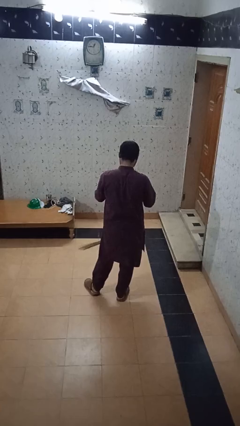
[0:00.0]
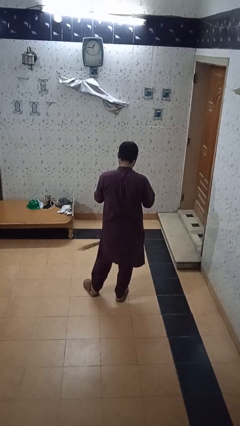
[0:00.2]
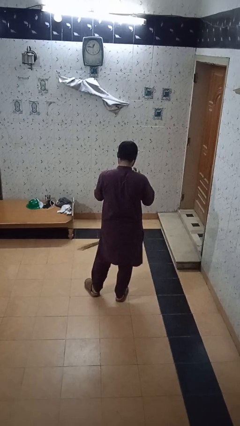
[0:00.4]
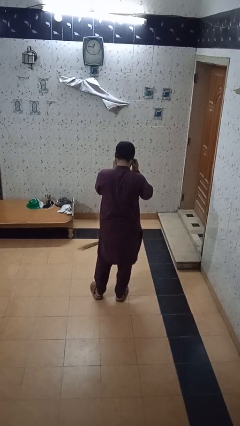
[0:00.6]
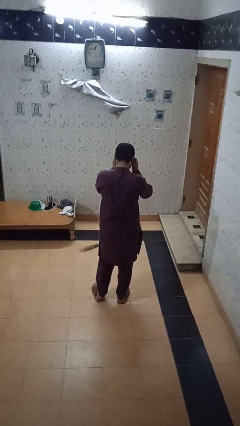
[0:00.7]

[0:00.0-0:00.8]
person takes off glasses

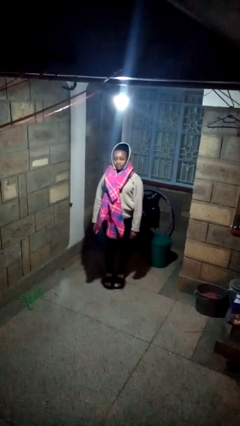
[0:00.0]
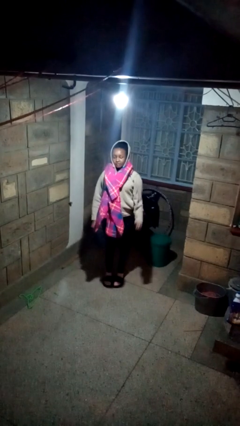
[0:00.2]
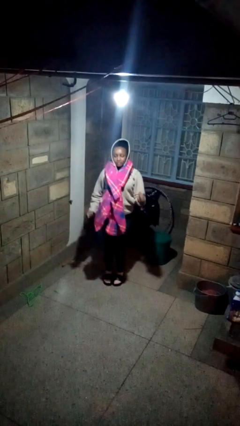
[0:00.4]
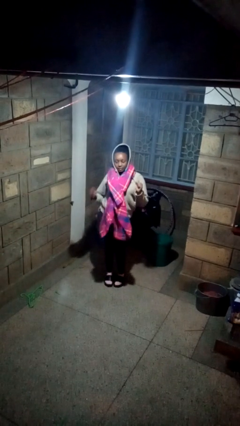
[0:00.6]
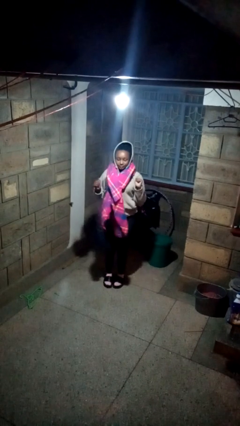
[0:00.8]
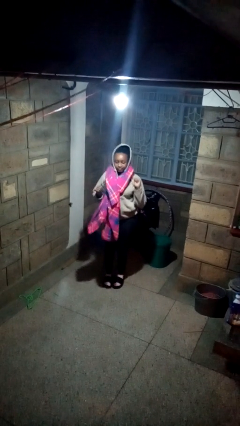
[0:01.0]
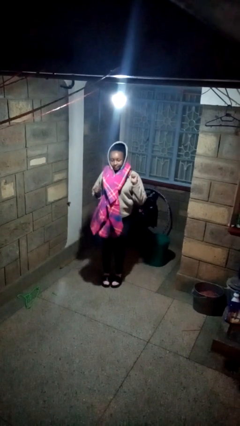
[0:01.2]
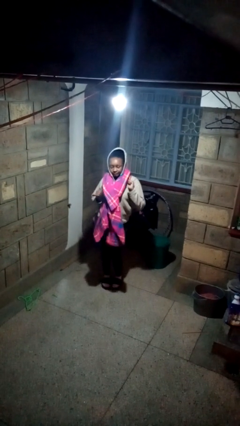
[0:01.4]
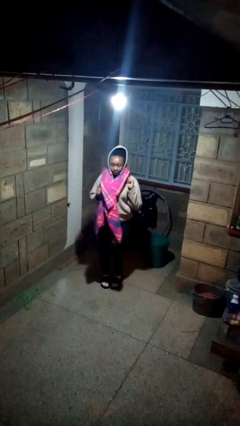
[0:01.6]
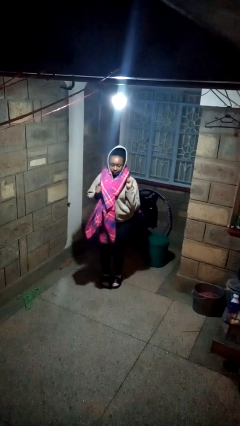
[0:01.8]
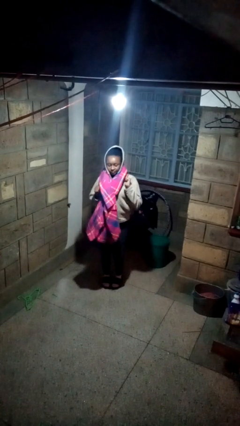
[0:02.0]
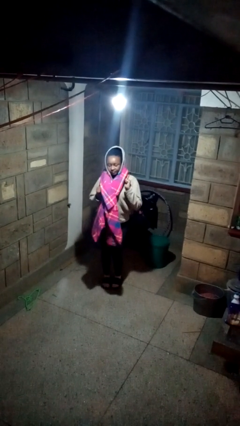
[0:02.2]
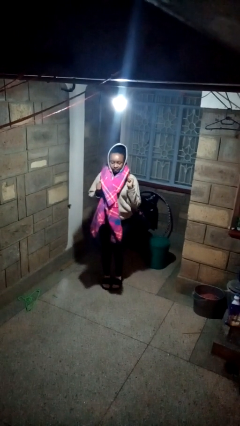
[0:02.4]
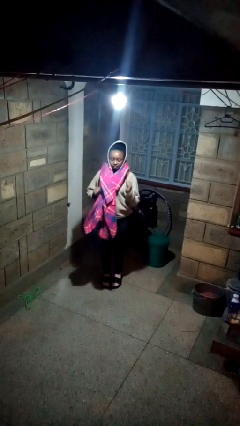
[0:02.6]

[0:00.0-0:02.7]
person wiggles hips

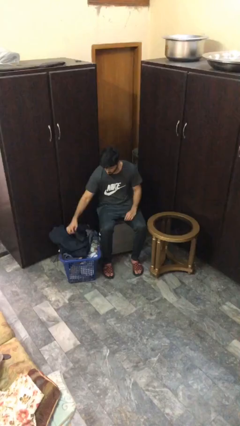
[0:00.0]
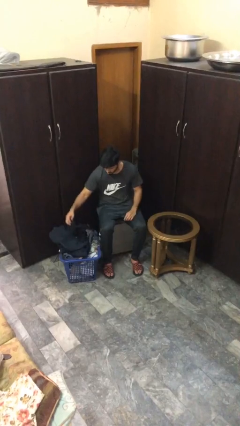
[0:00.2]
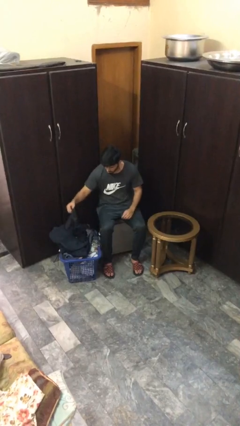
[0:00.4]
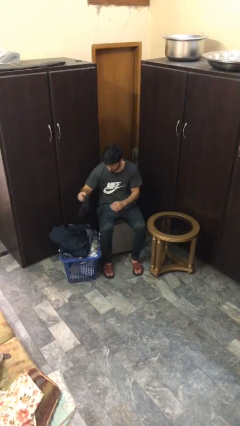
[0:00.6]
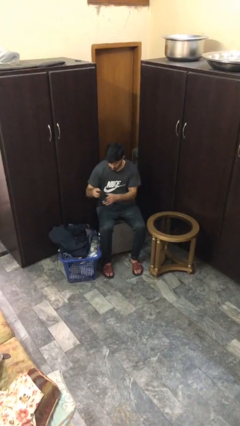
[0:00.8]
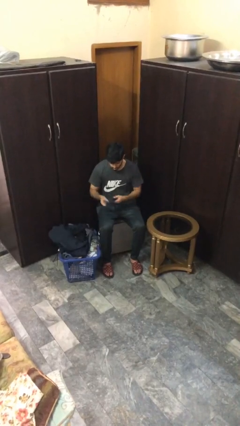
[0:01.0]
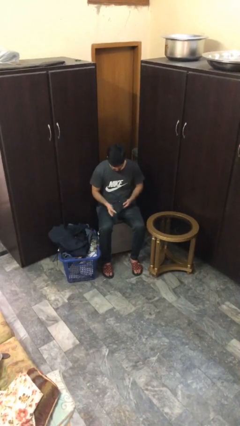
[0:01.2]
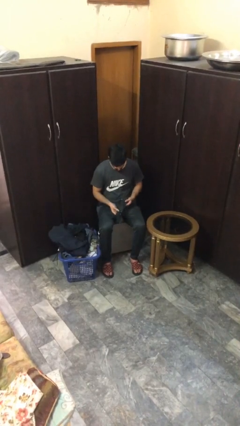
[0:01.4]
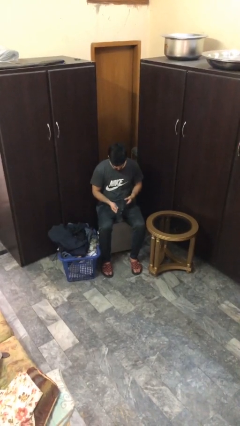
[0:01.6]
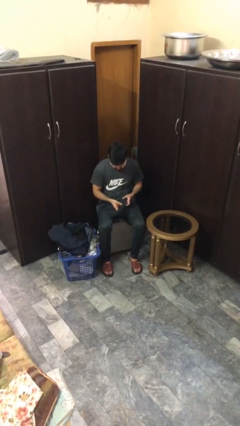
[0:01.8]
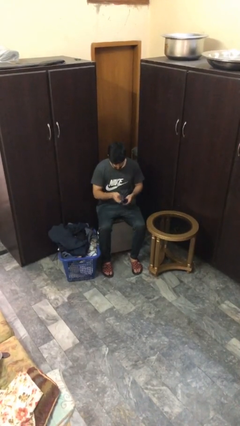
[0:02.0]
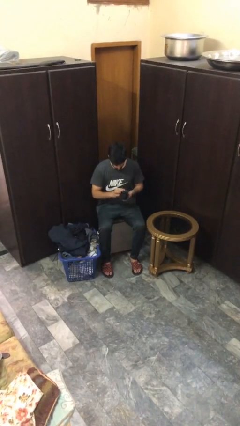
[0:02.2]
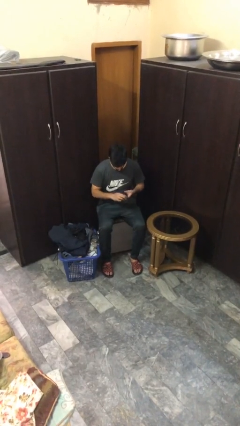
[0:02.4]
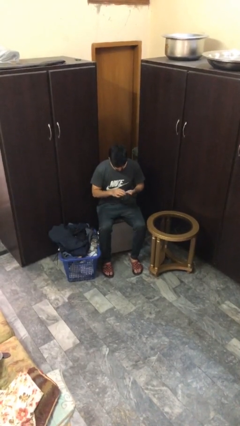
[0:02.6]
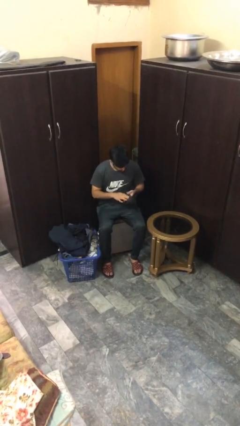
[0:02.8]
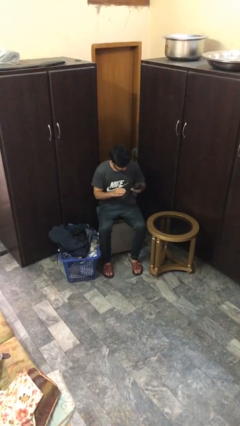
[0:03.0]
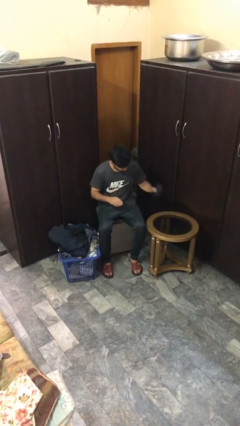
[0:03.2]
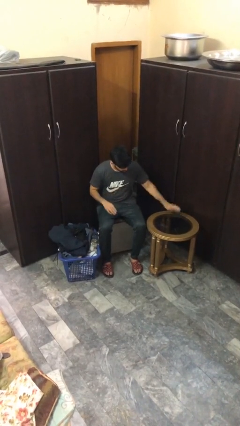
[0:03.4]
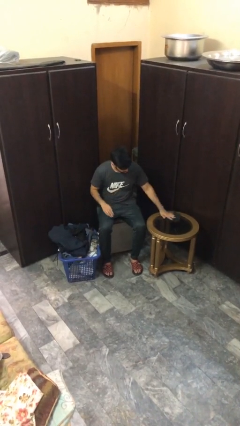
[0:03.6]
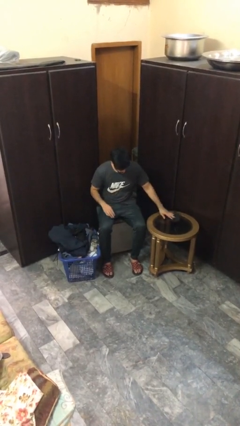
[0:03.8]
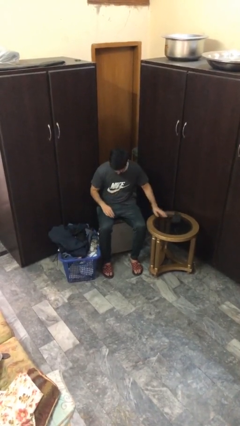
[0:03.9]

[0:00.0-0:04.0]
person folds socks

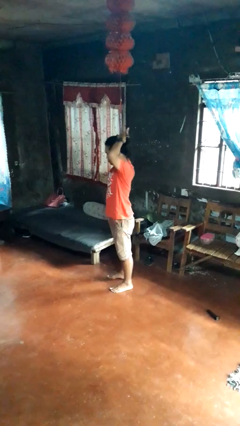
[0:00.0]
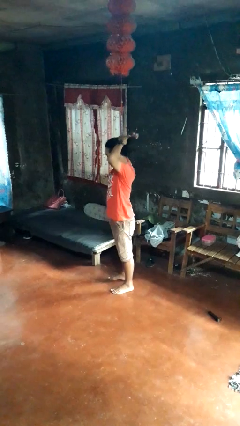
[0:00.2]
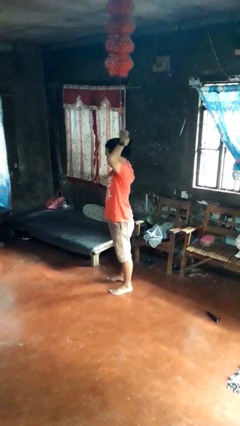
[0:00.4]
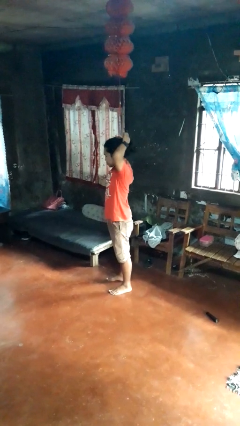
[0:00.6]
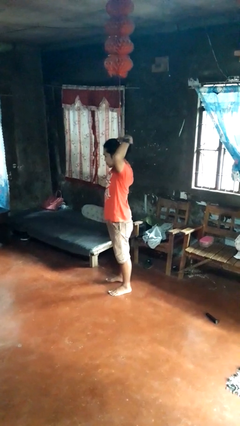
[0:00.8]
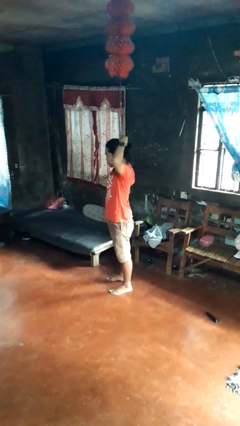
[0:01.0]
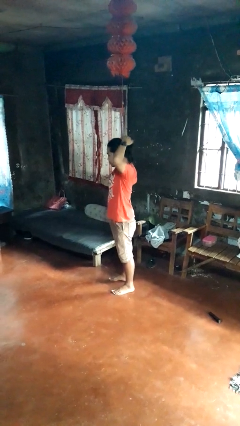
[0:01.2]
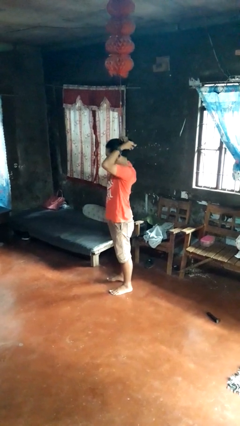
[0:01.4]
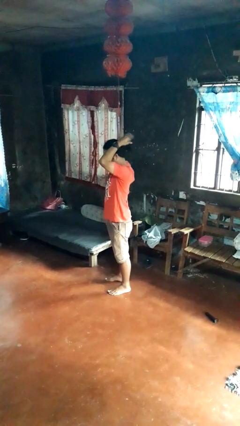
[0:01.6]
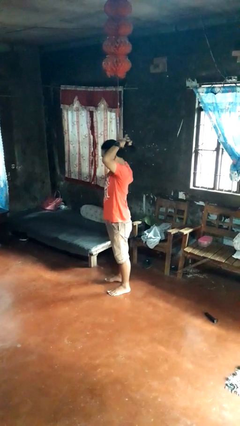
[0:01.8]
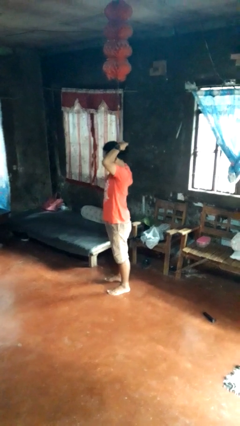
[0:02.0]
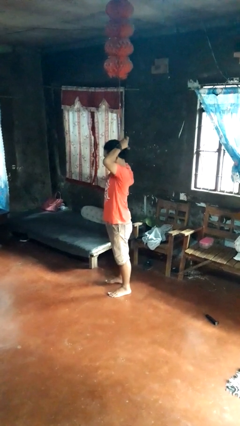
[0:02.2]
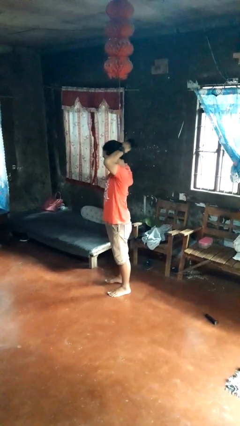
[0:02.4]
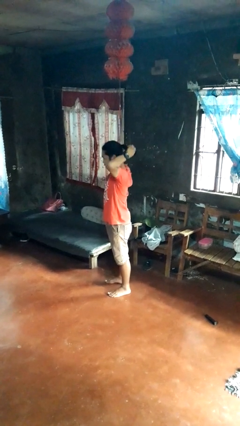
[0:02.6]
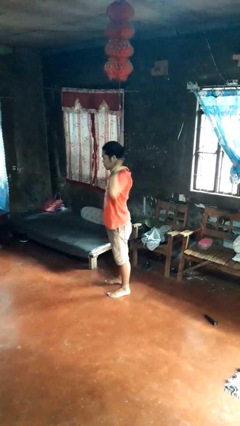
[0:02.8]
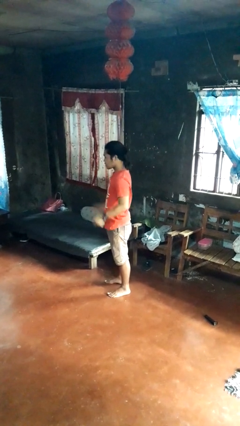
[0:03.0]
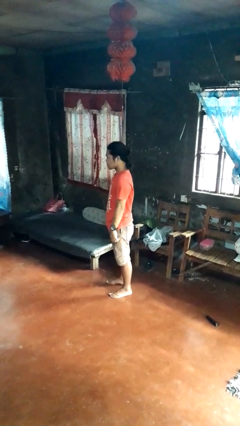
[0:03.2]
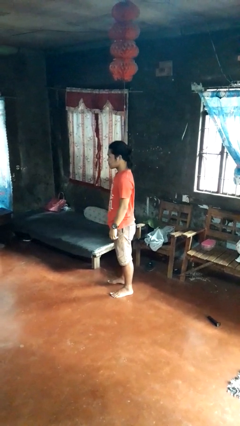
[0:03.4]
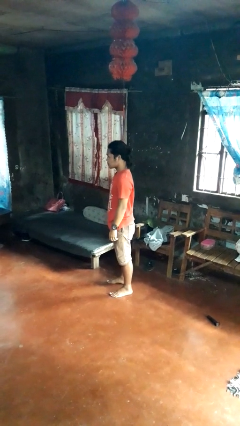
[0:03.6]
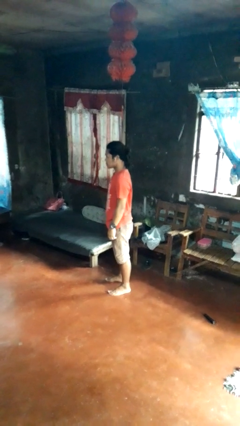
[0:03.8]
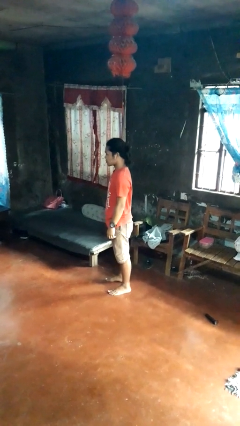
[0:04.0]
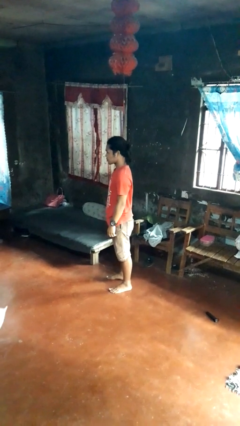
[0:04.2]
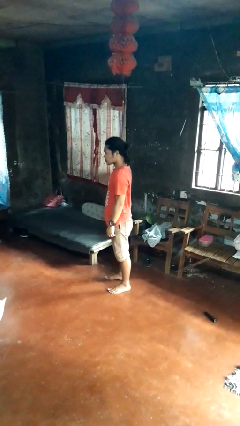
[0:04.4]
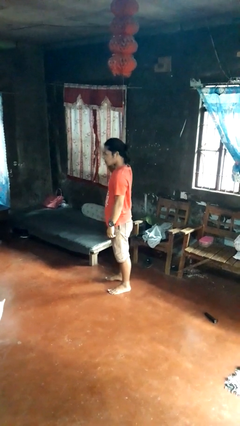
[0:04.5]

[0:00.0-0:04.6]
person puts hair in ponytail

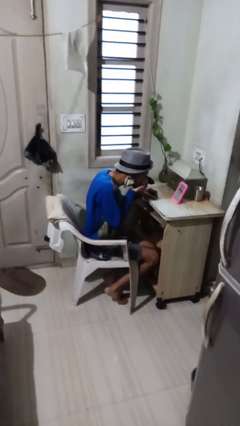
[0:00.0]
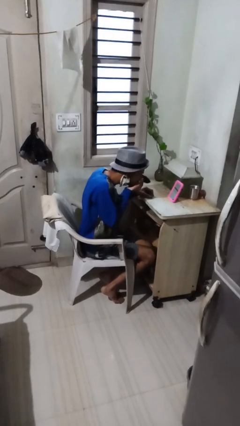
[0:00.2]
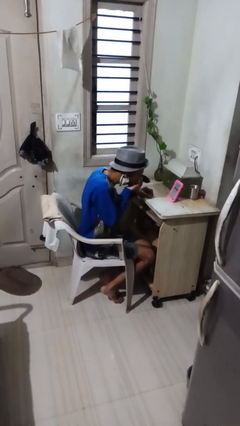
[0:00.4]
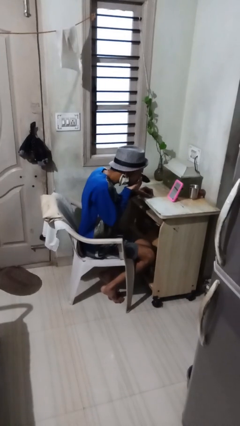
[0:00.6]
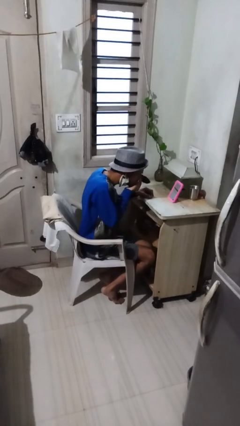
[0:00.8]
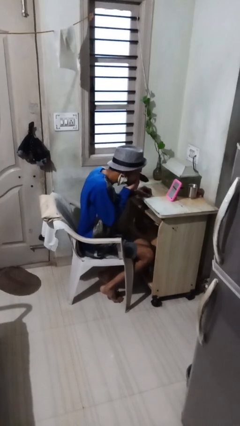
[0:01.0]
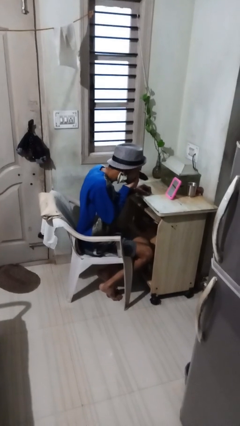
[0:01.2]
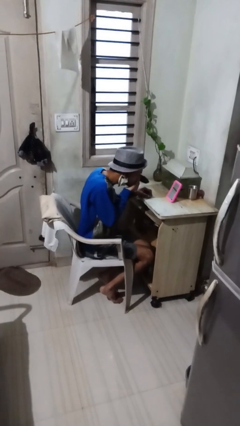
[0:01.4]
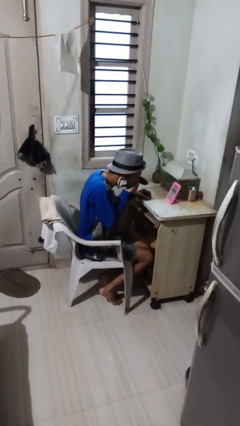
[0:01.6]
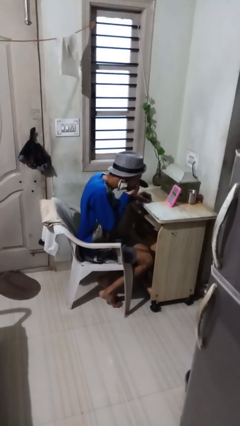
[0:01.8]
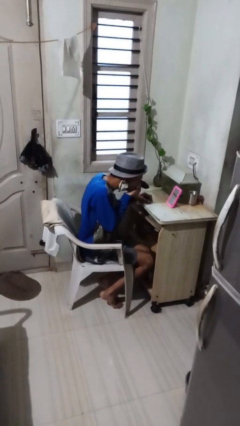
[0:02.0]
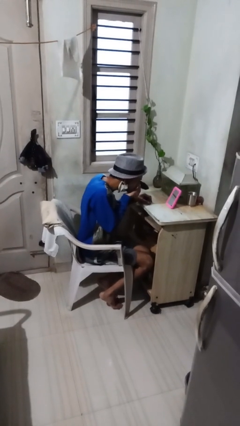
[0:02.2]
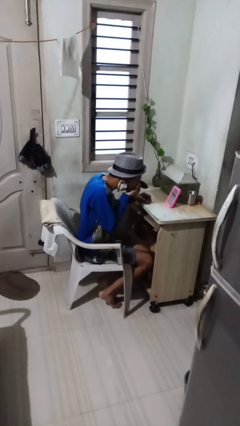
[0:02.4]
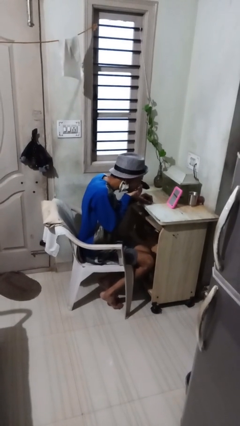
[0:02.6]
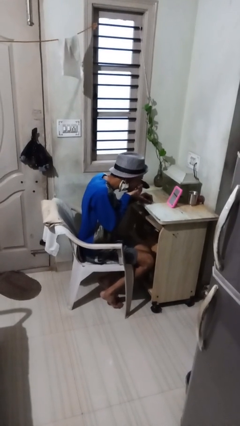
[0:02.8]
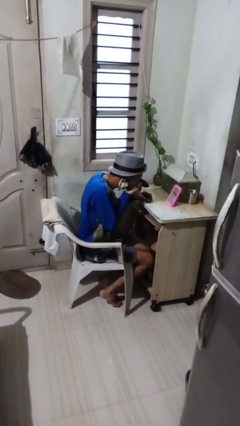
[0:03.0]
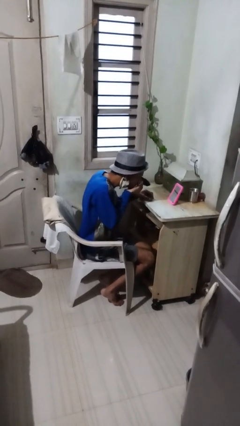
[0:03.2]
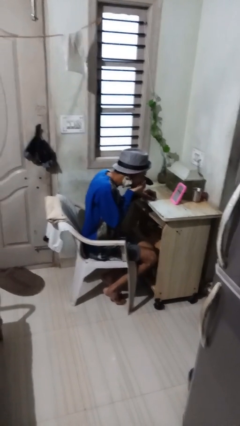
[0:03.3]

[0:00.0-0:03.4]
person applies eye makeup

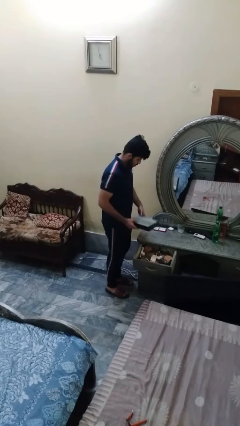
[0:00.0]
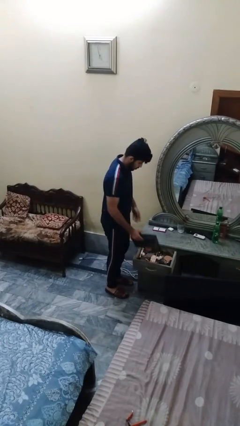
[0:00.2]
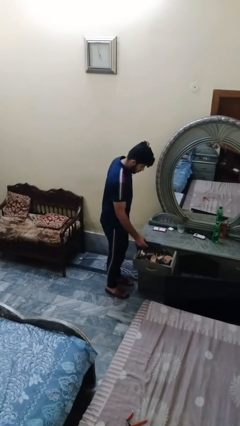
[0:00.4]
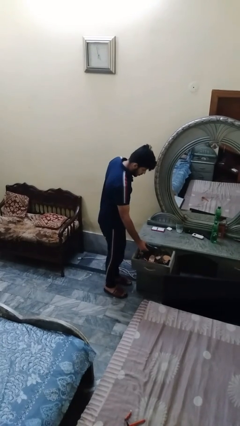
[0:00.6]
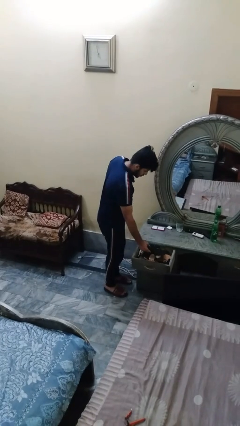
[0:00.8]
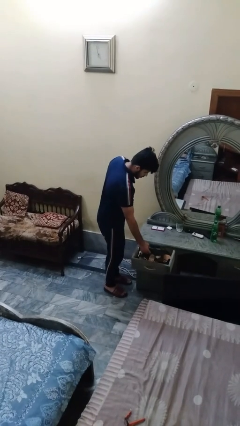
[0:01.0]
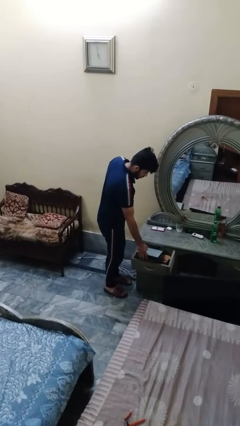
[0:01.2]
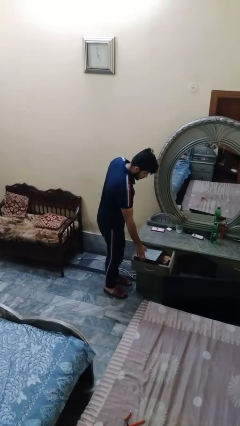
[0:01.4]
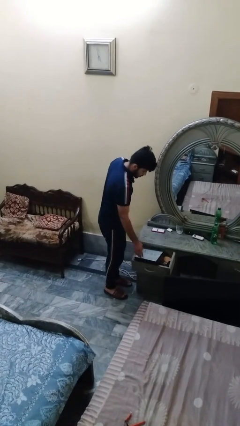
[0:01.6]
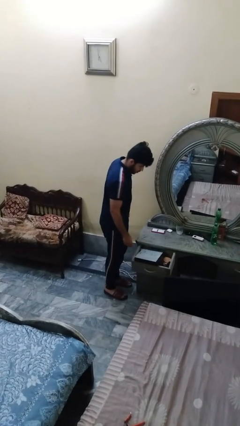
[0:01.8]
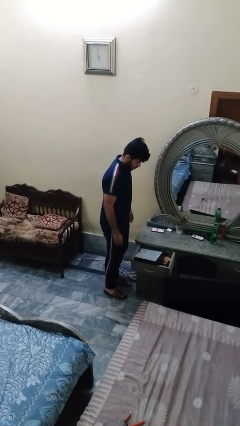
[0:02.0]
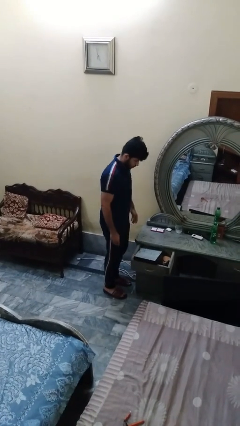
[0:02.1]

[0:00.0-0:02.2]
person puts down object into cabinet
